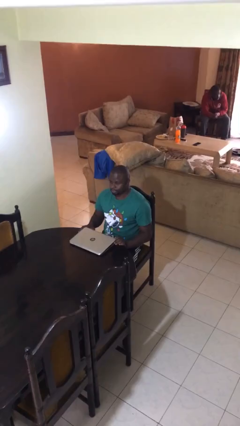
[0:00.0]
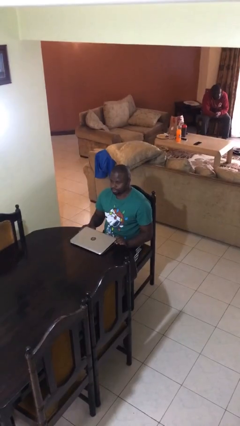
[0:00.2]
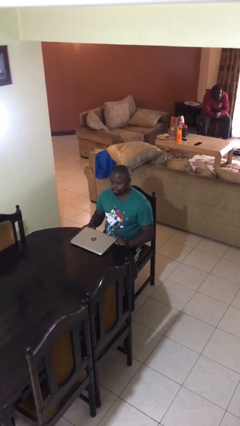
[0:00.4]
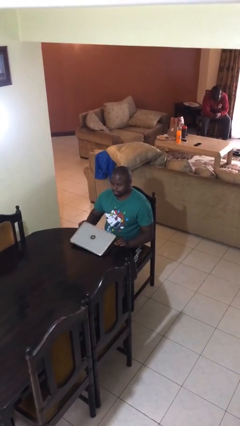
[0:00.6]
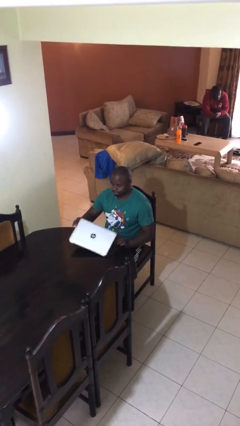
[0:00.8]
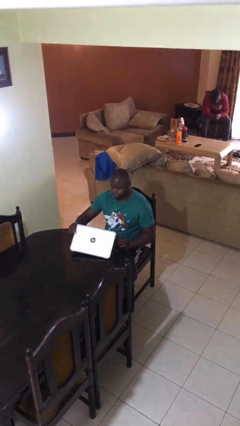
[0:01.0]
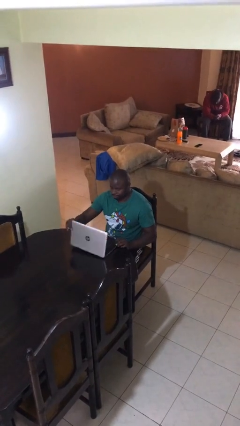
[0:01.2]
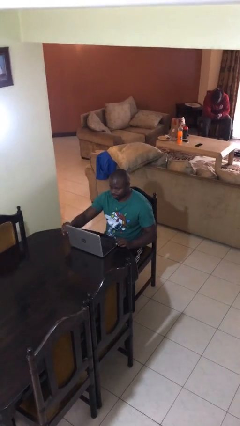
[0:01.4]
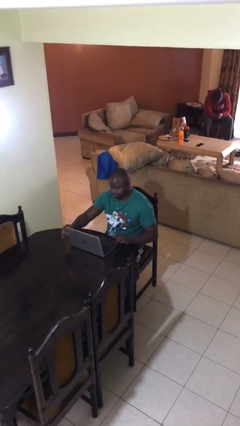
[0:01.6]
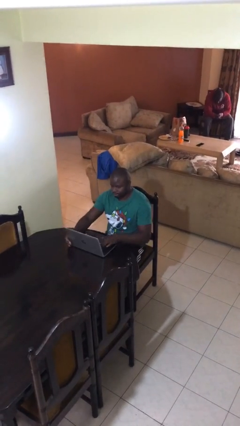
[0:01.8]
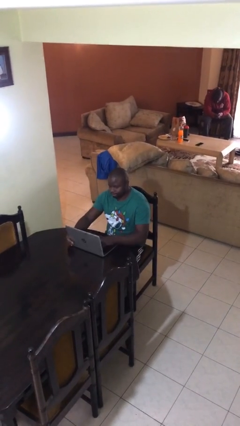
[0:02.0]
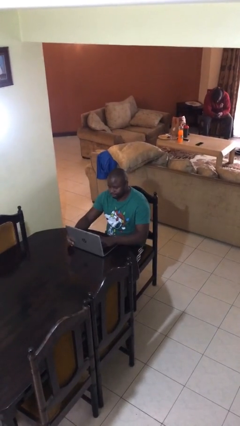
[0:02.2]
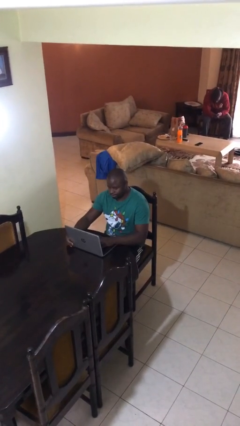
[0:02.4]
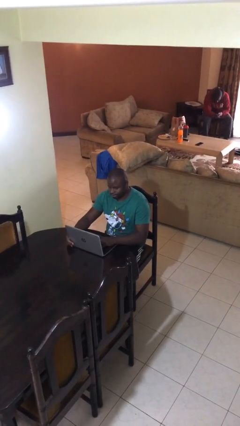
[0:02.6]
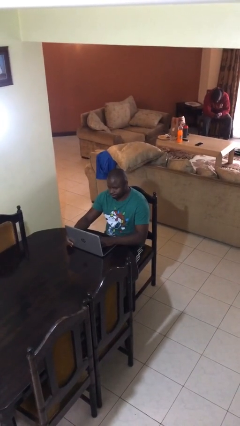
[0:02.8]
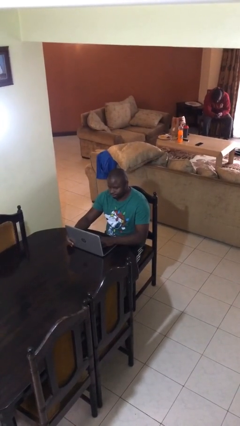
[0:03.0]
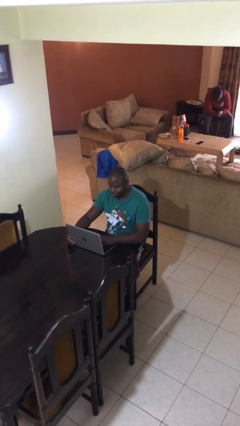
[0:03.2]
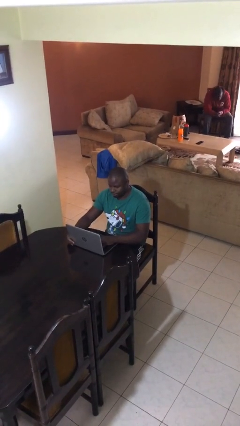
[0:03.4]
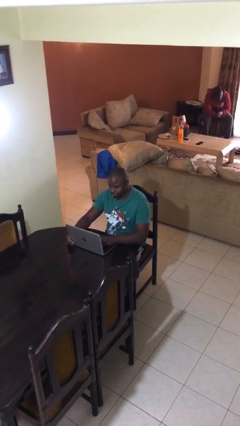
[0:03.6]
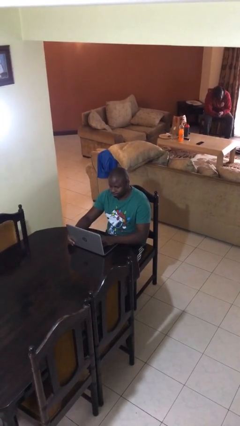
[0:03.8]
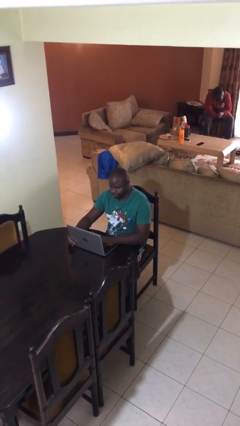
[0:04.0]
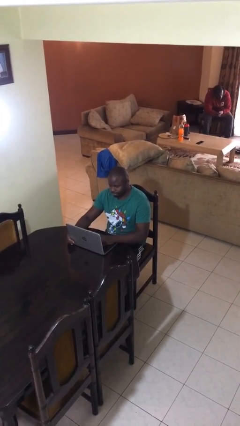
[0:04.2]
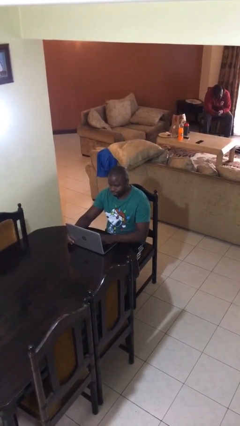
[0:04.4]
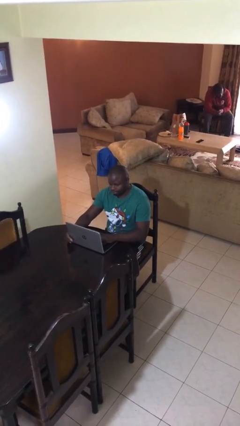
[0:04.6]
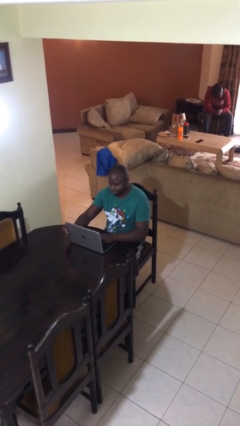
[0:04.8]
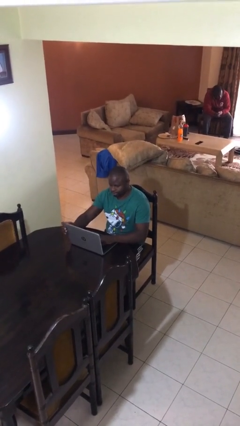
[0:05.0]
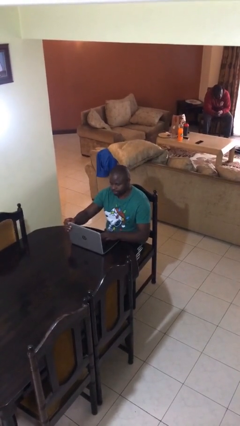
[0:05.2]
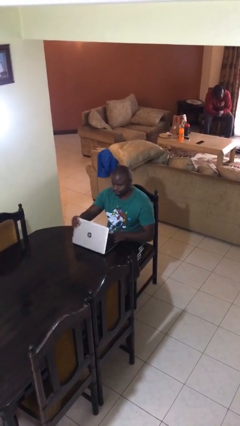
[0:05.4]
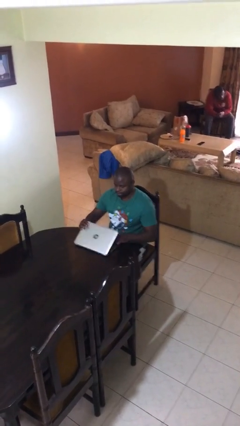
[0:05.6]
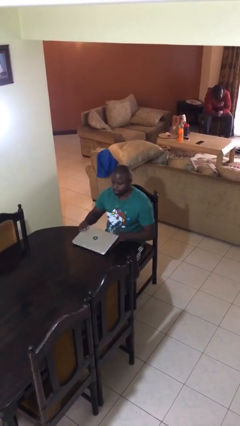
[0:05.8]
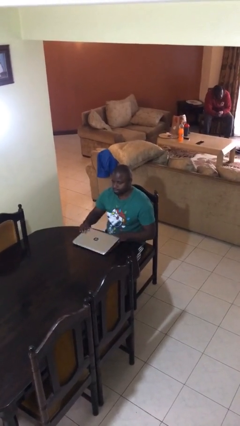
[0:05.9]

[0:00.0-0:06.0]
person interacts with laptop

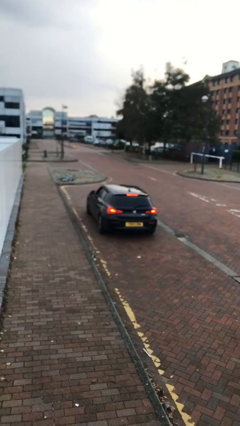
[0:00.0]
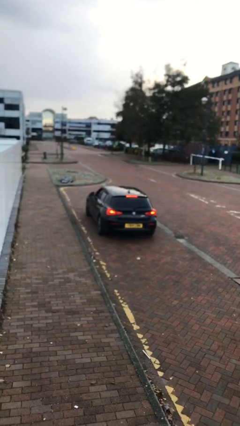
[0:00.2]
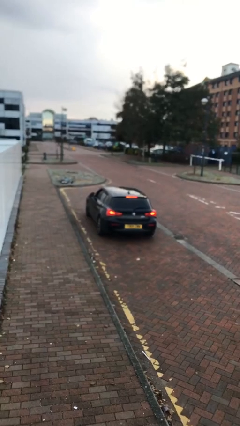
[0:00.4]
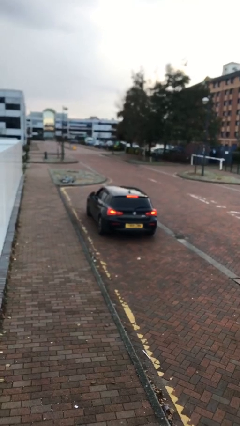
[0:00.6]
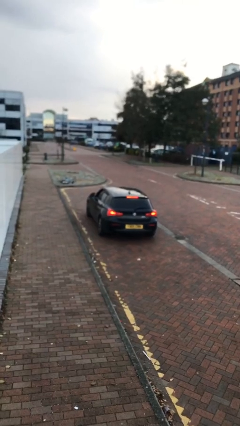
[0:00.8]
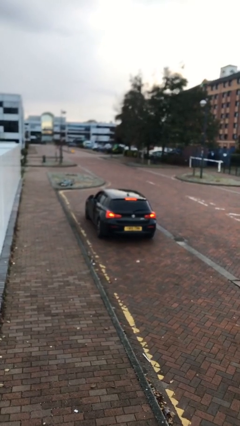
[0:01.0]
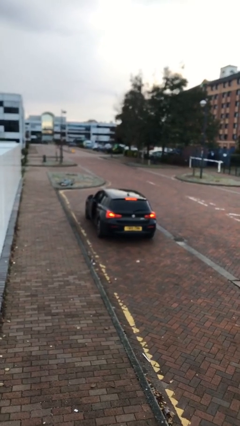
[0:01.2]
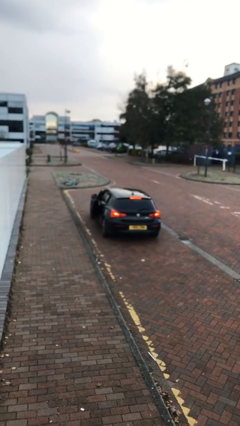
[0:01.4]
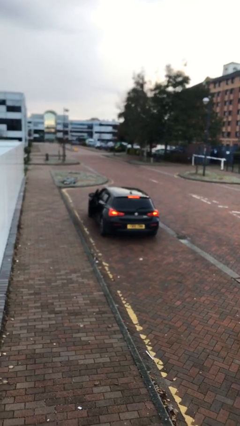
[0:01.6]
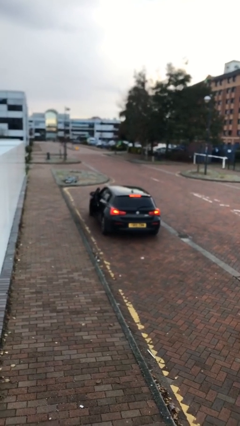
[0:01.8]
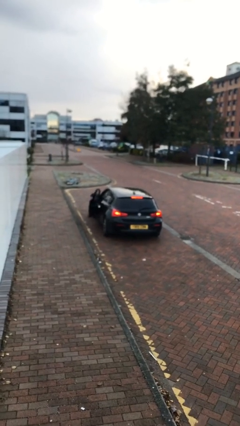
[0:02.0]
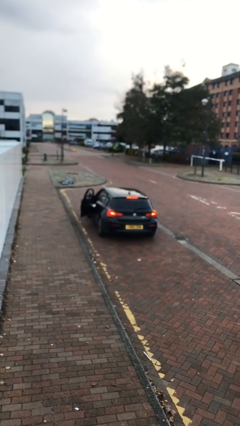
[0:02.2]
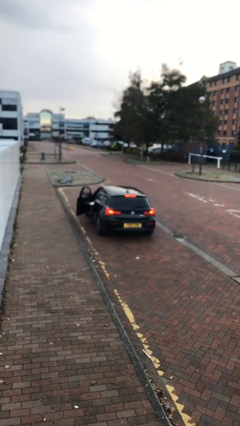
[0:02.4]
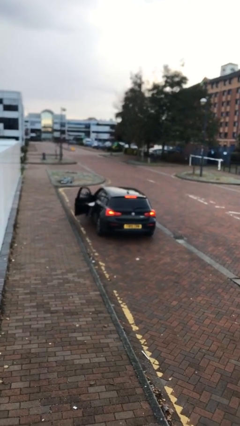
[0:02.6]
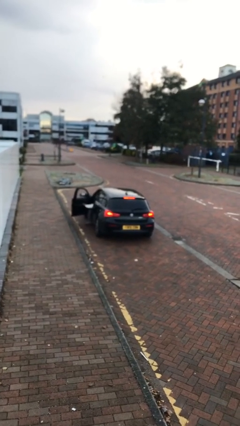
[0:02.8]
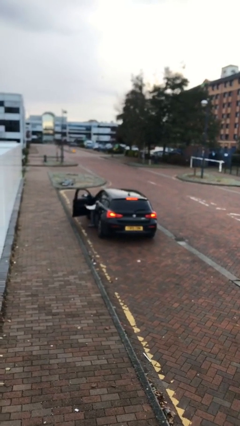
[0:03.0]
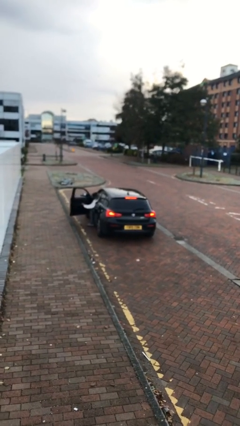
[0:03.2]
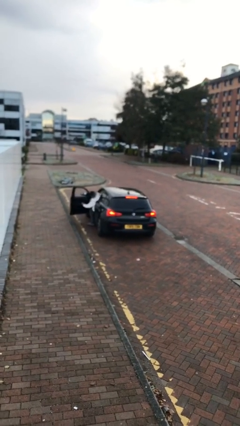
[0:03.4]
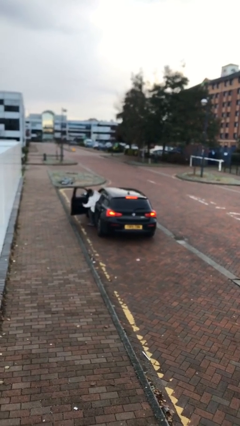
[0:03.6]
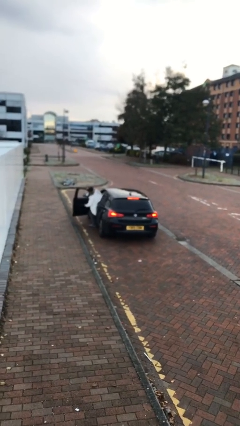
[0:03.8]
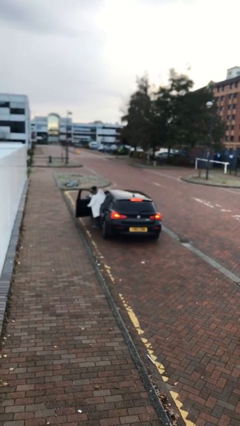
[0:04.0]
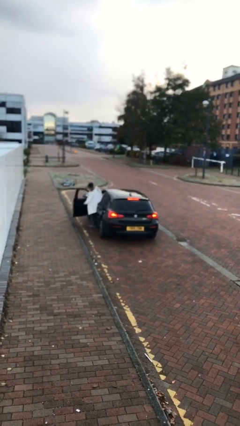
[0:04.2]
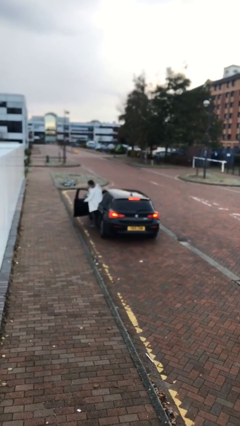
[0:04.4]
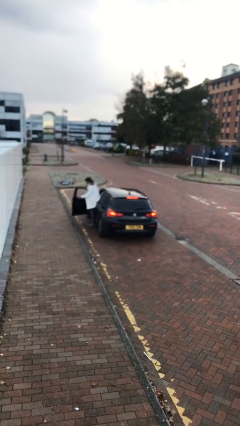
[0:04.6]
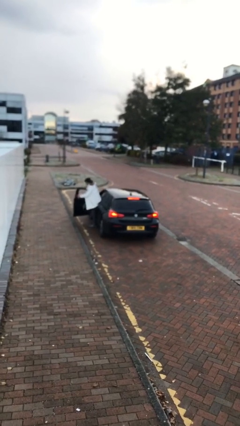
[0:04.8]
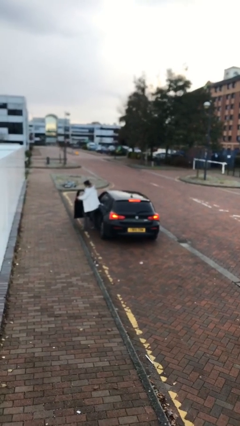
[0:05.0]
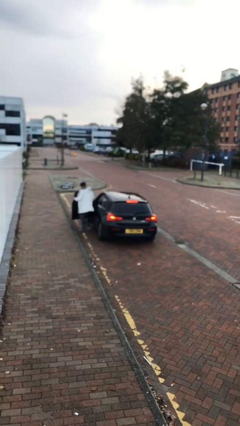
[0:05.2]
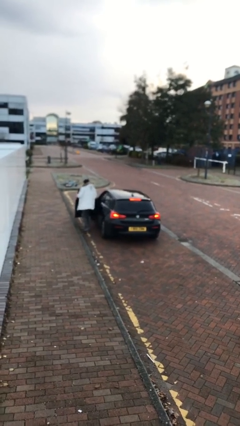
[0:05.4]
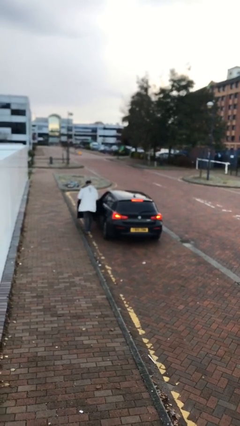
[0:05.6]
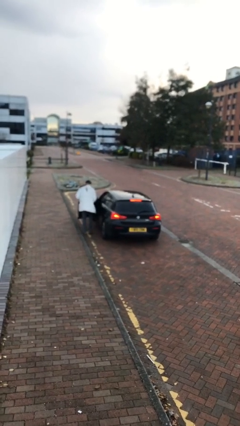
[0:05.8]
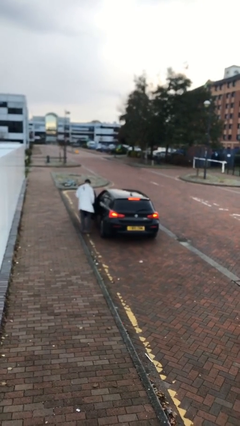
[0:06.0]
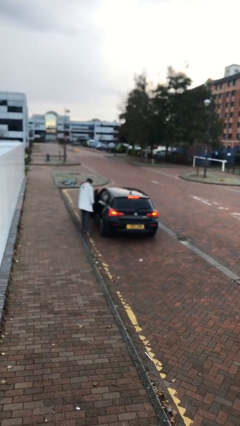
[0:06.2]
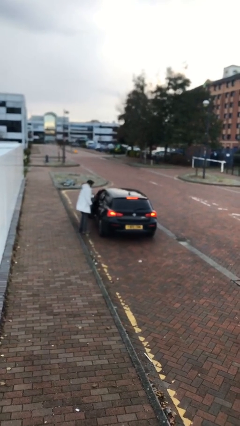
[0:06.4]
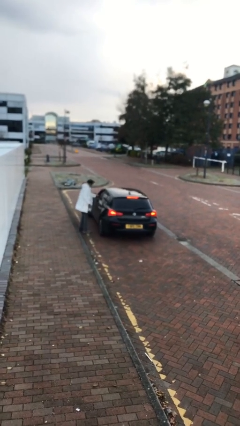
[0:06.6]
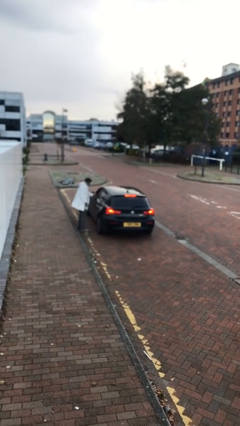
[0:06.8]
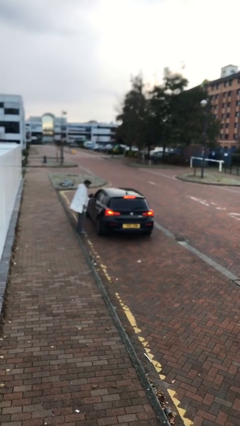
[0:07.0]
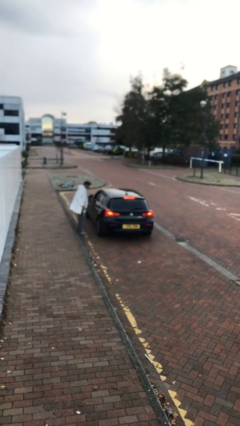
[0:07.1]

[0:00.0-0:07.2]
car drops off person

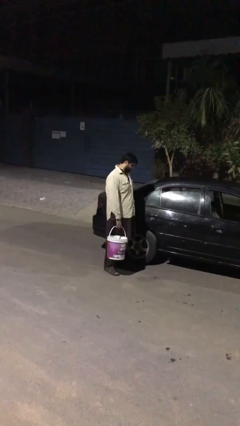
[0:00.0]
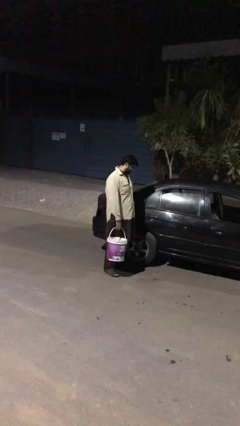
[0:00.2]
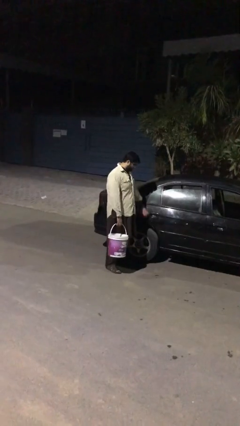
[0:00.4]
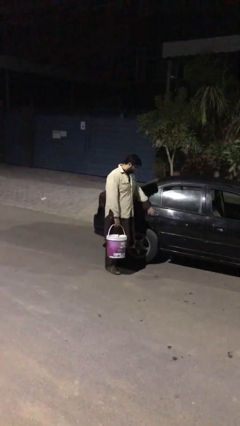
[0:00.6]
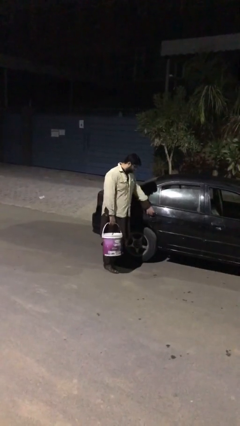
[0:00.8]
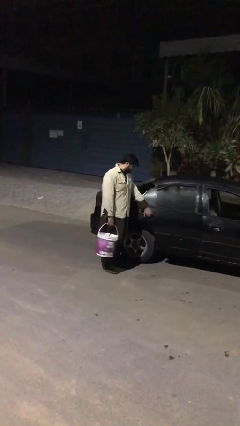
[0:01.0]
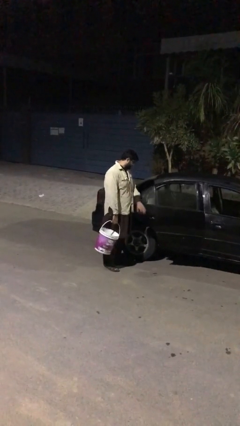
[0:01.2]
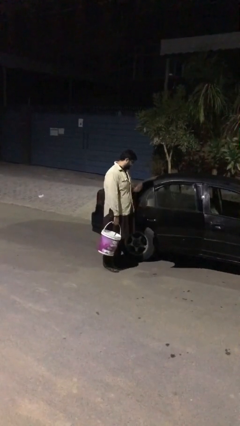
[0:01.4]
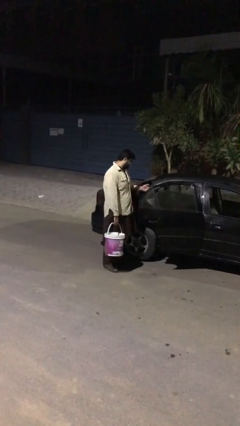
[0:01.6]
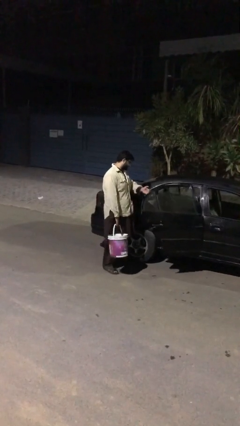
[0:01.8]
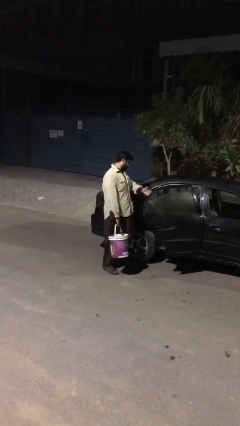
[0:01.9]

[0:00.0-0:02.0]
person opens car door

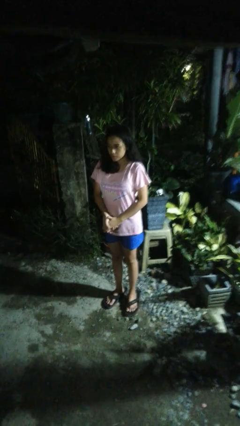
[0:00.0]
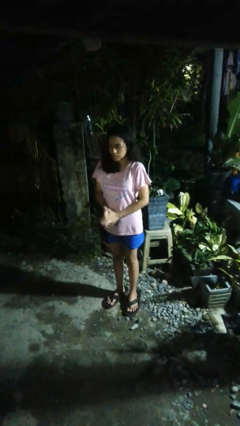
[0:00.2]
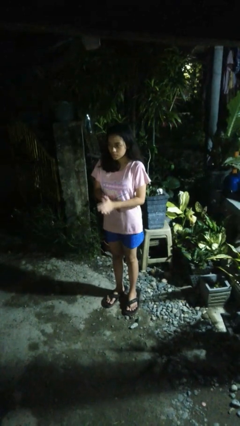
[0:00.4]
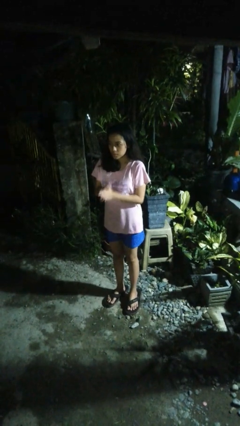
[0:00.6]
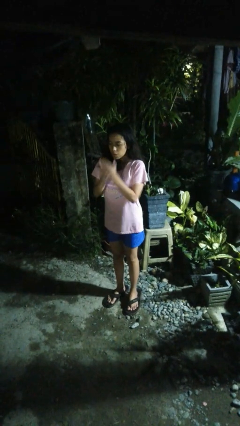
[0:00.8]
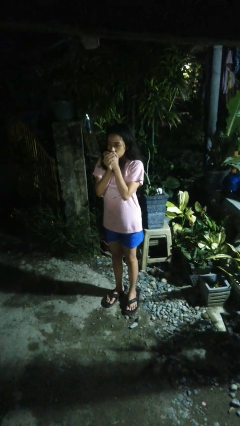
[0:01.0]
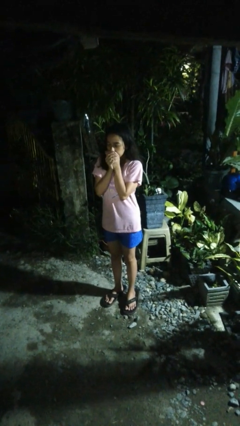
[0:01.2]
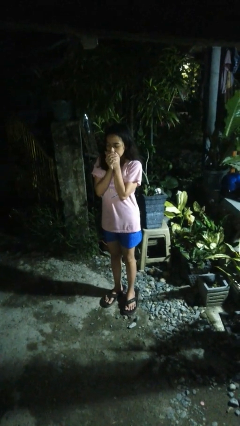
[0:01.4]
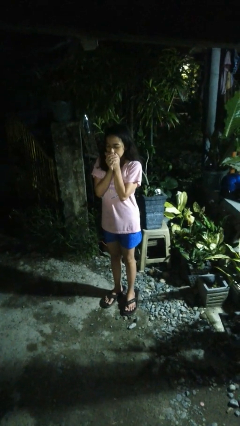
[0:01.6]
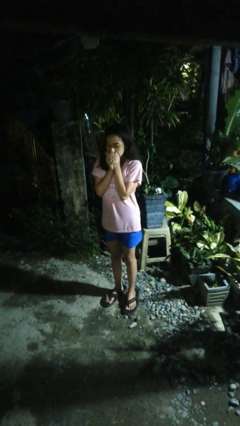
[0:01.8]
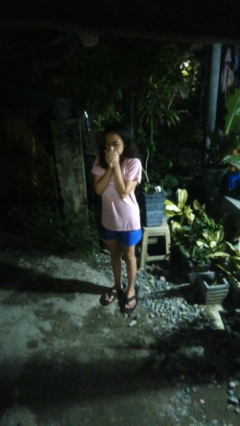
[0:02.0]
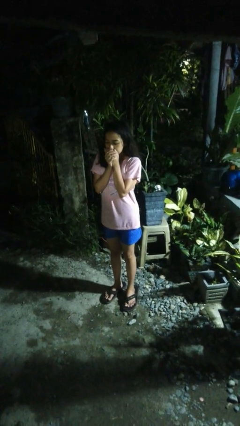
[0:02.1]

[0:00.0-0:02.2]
person blows into hands

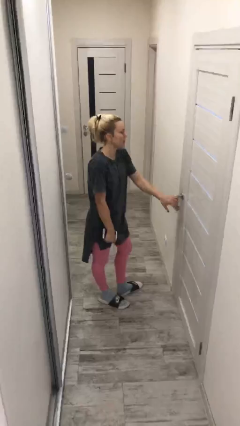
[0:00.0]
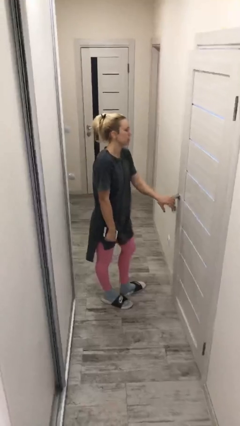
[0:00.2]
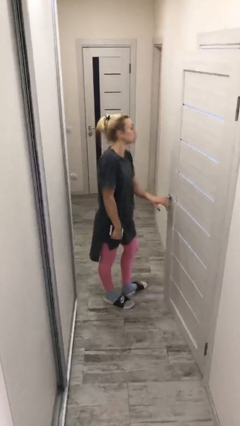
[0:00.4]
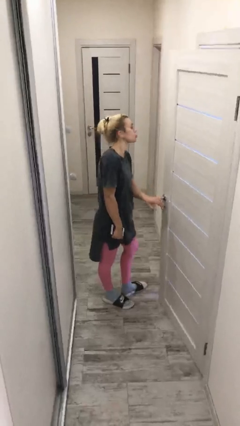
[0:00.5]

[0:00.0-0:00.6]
person opens facility door
